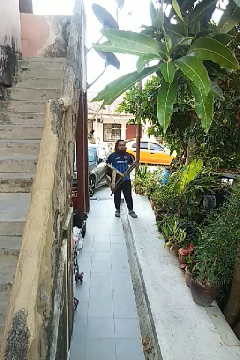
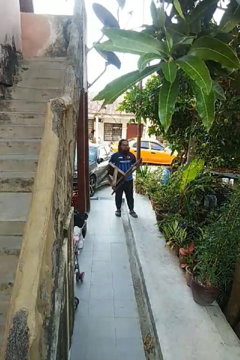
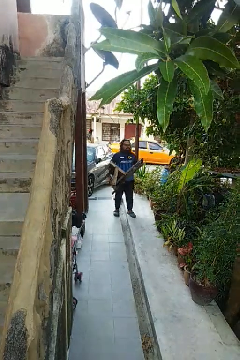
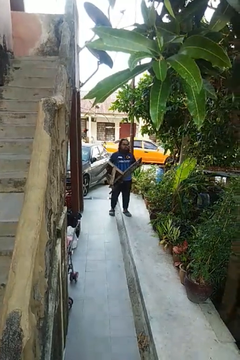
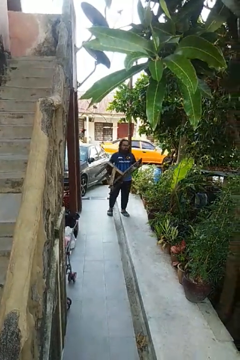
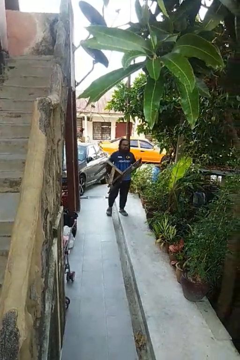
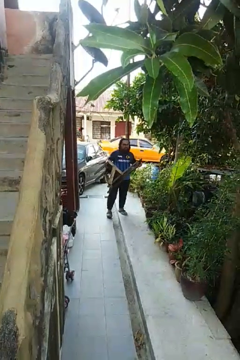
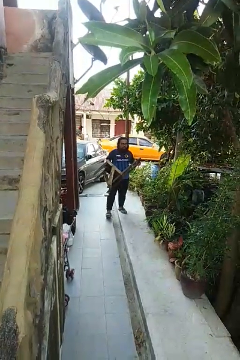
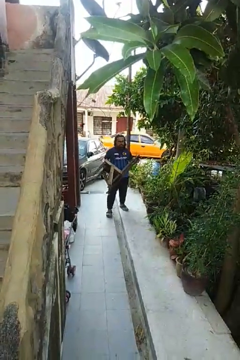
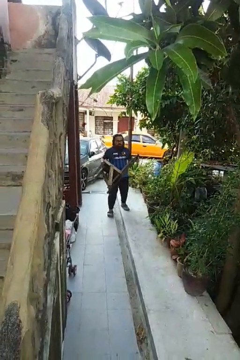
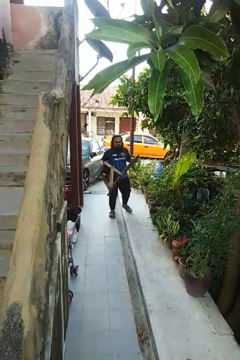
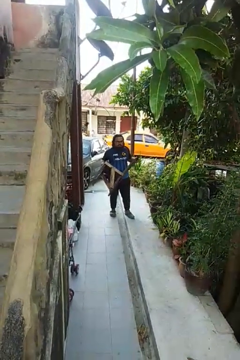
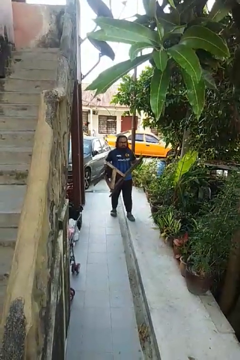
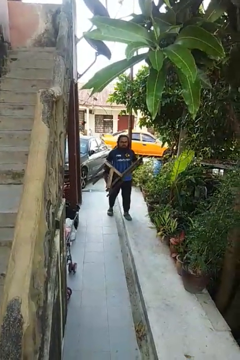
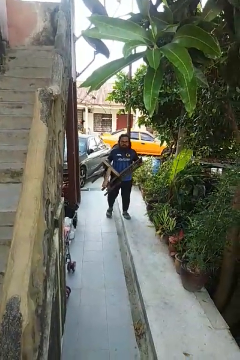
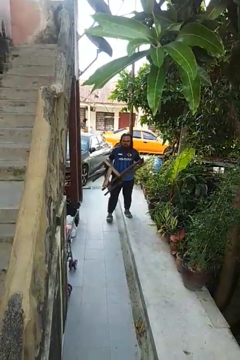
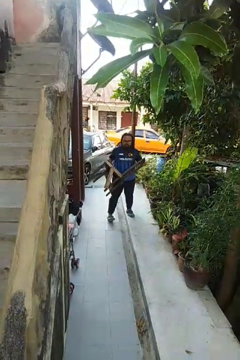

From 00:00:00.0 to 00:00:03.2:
person carries furniture

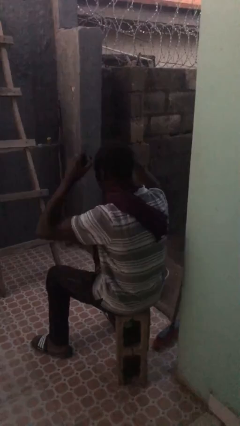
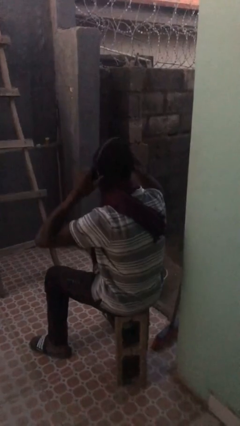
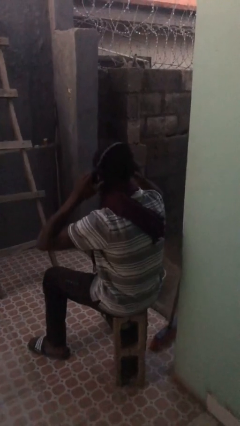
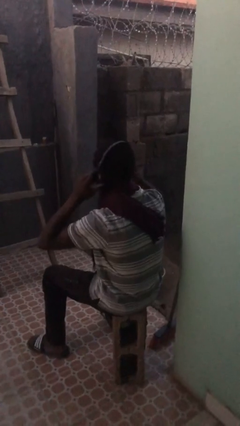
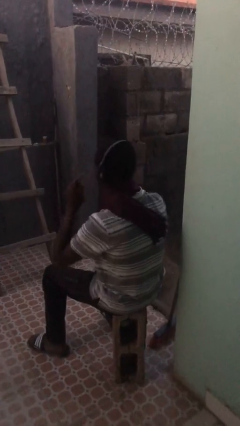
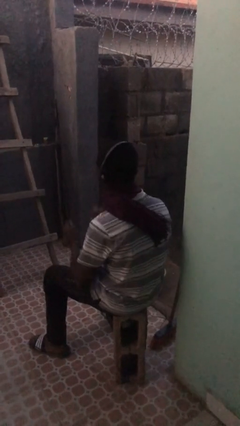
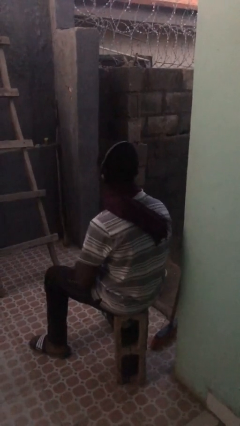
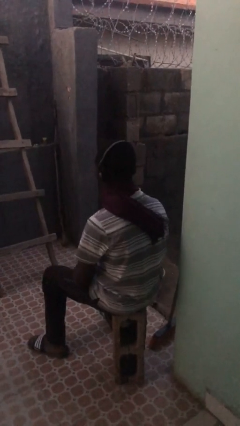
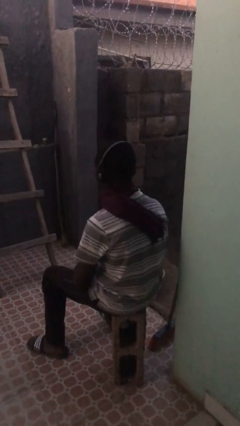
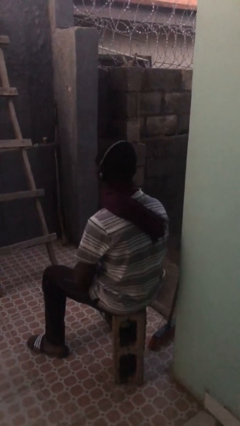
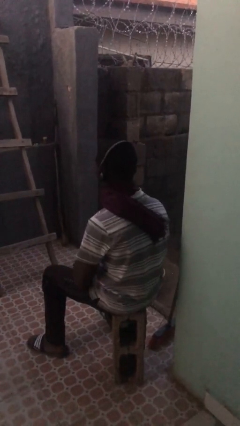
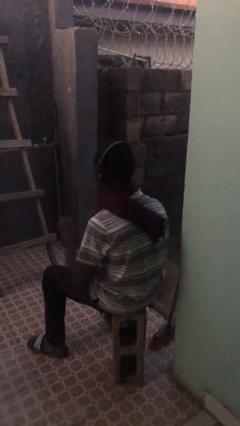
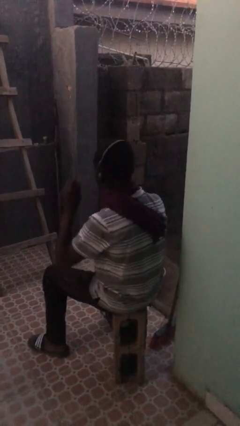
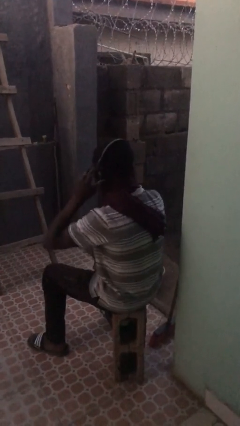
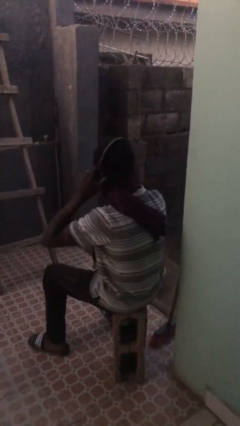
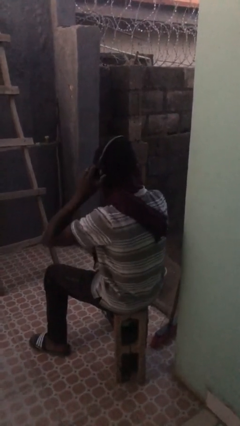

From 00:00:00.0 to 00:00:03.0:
person puts on headphones

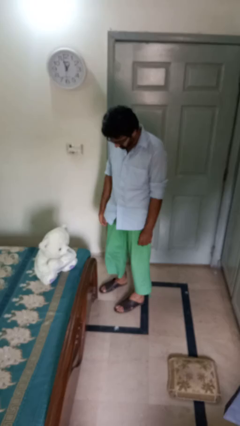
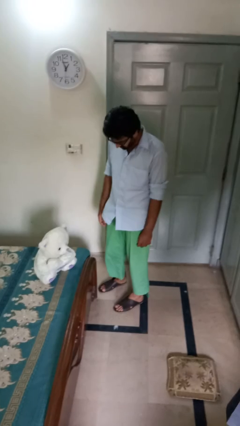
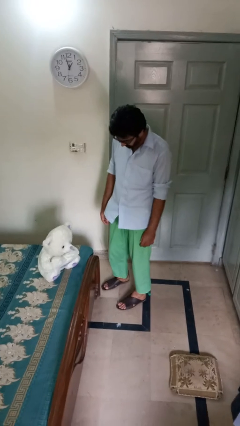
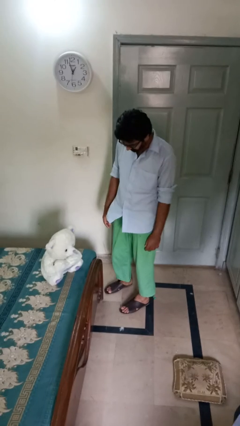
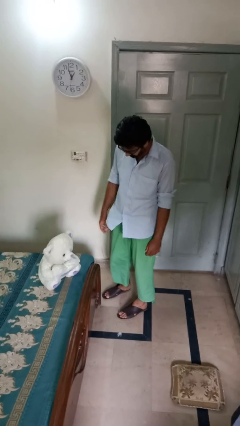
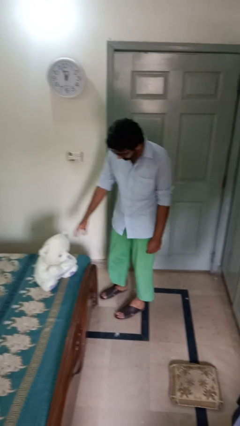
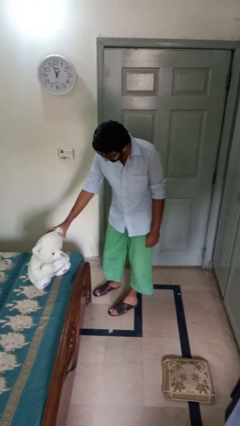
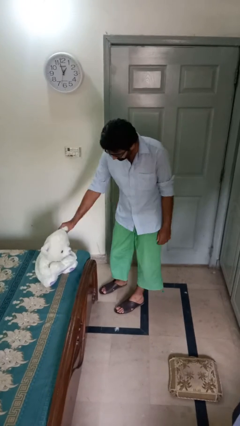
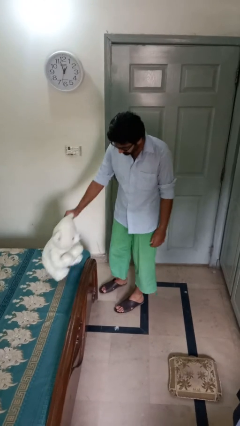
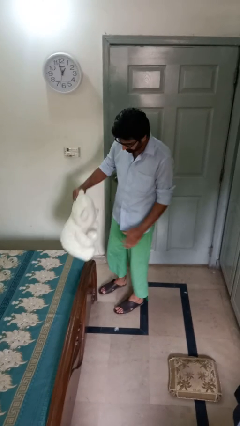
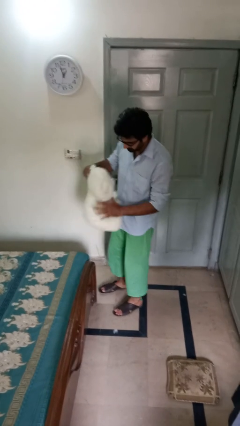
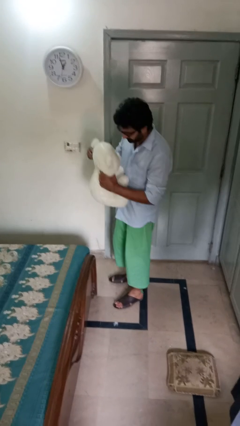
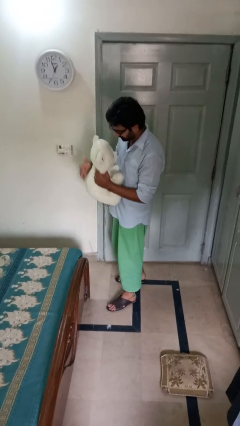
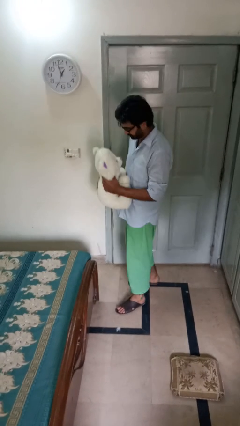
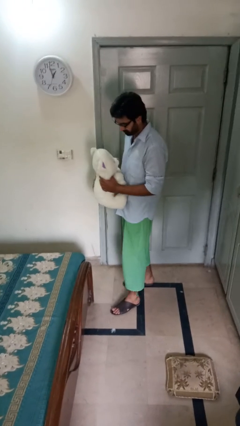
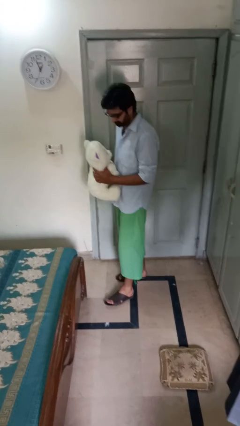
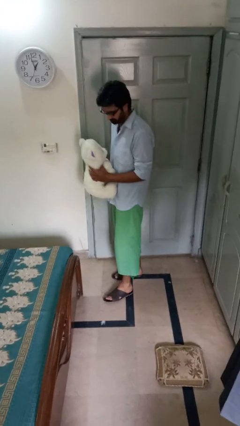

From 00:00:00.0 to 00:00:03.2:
person picks up object from bed

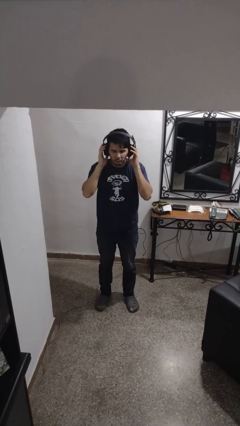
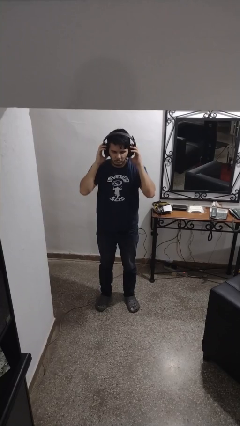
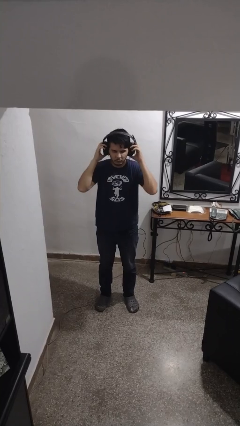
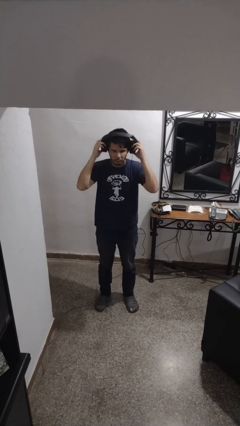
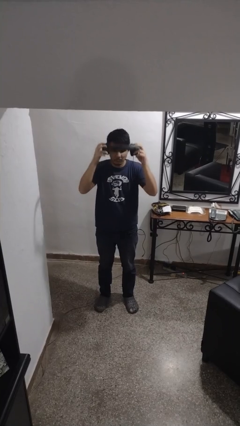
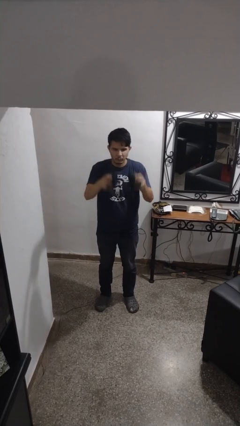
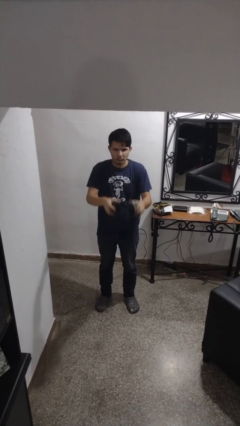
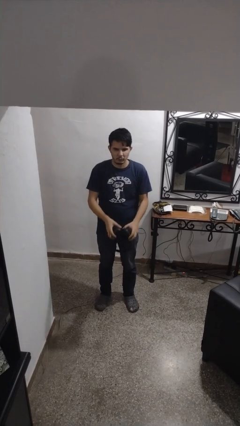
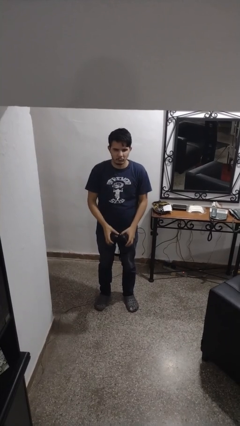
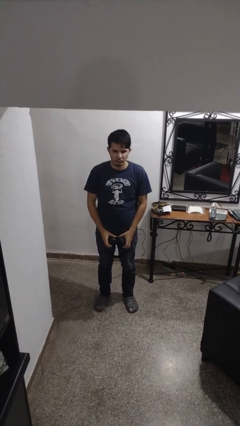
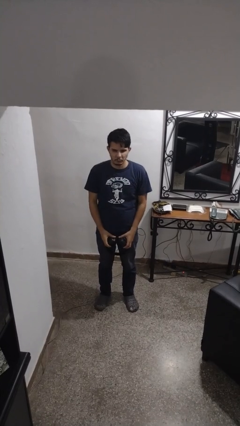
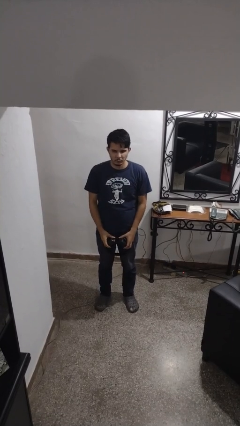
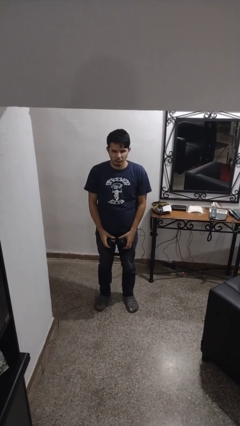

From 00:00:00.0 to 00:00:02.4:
person takes off headphones

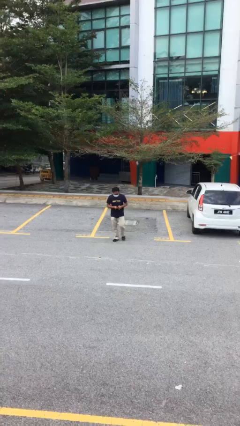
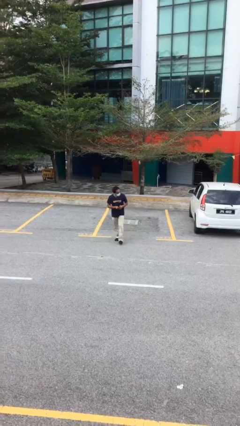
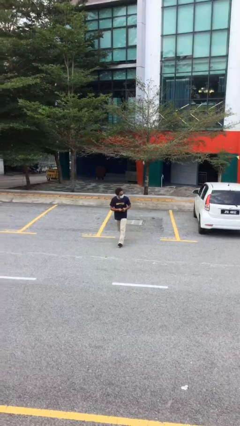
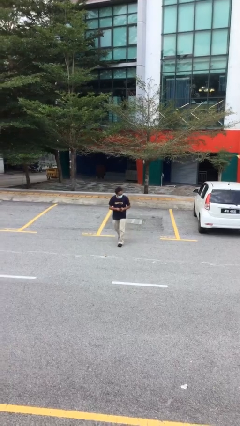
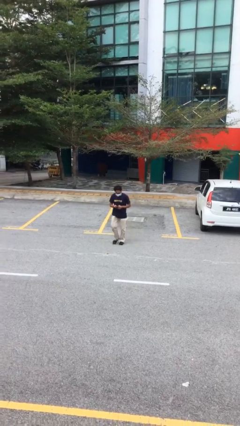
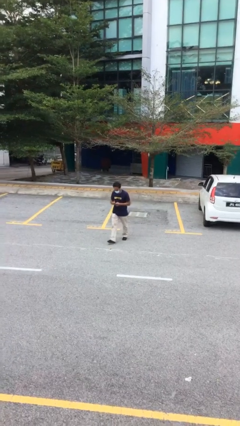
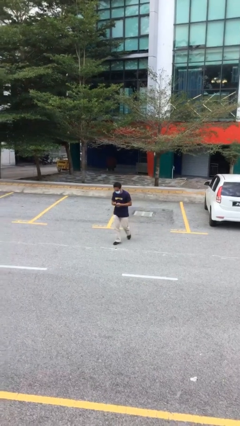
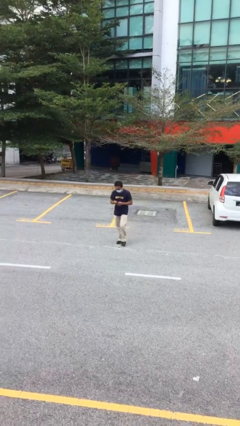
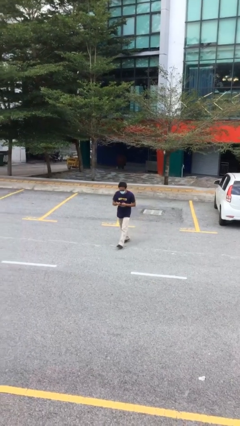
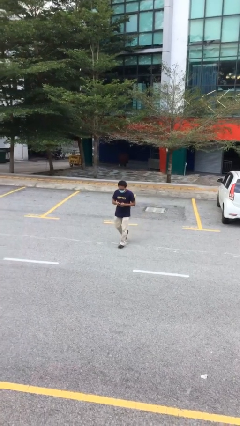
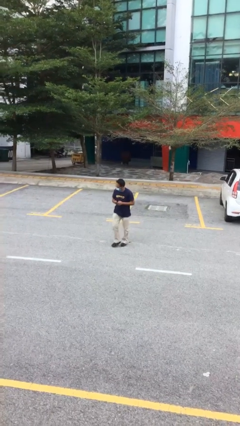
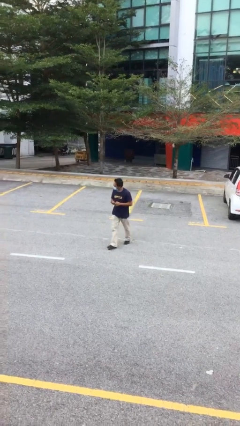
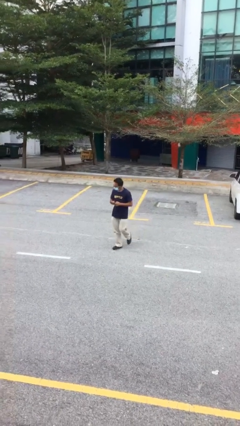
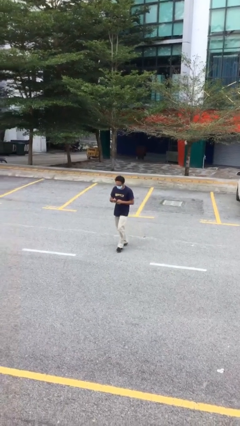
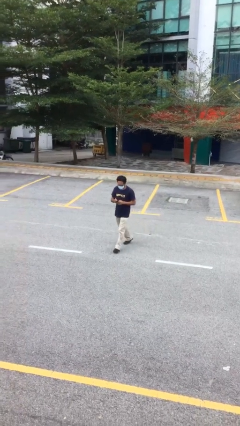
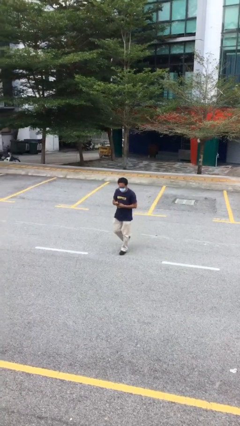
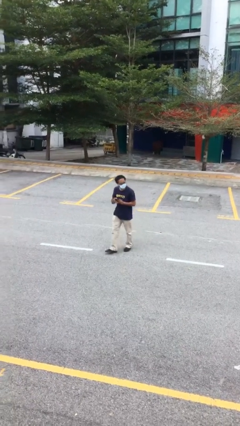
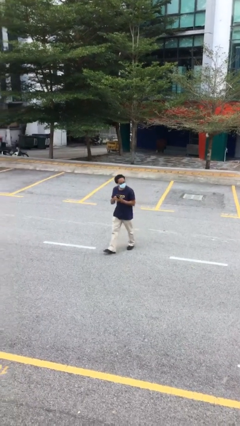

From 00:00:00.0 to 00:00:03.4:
person texts on phone

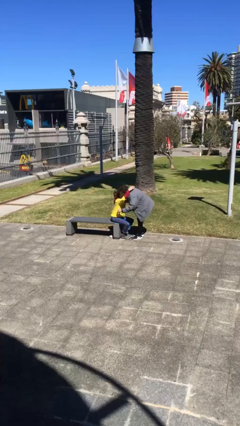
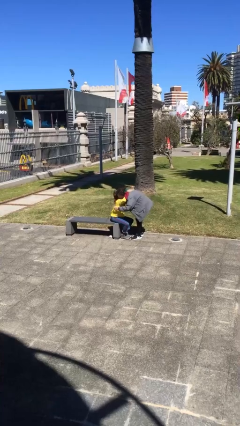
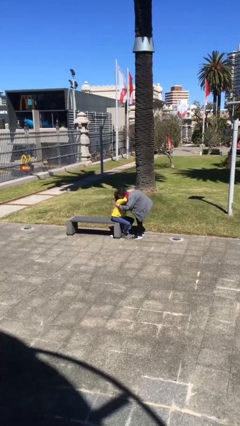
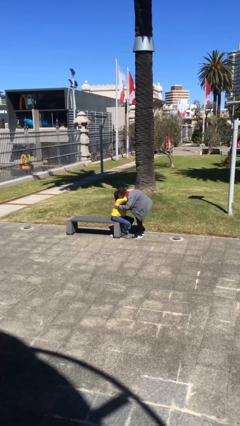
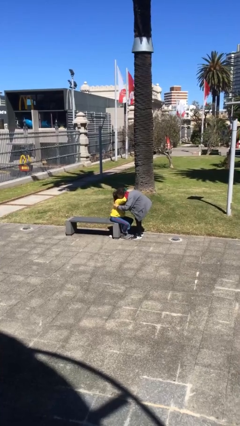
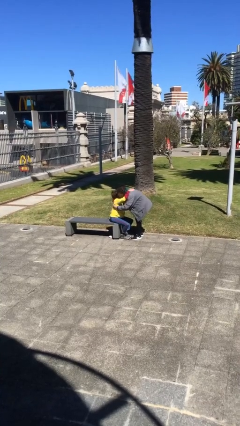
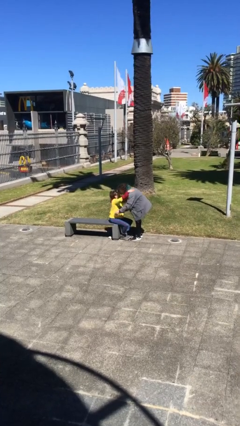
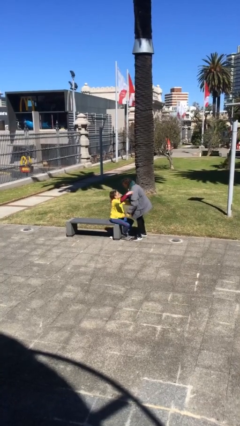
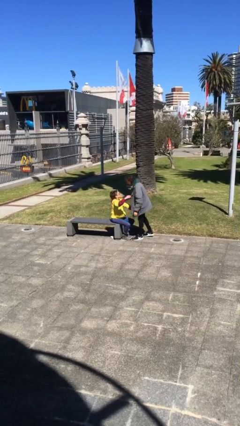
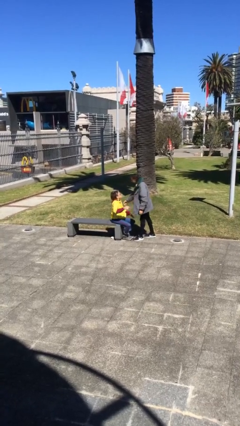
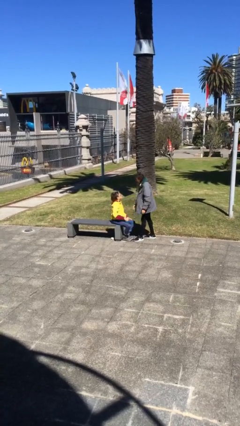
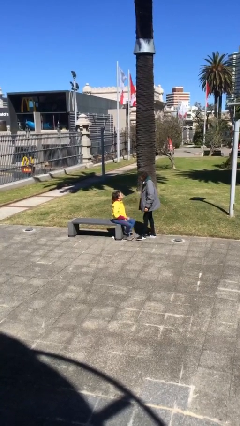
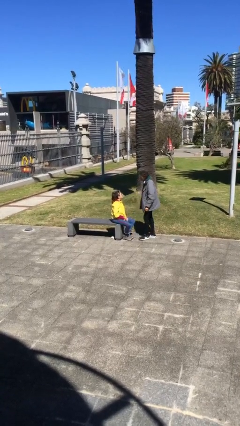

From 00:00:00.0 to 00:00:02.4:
person embraces person

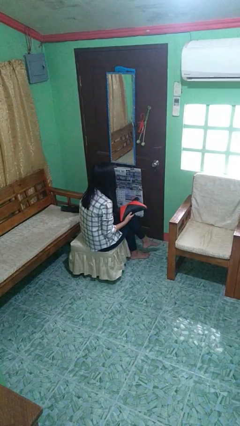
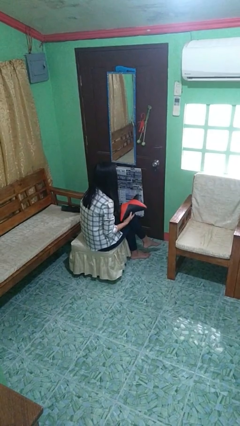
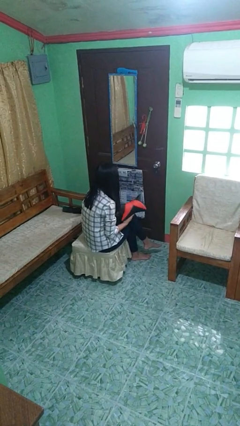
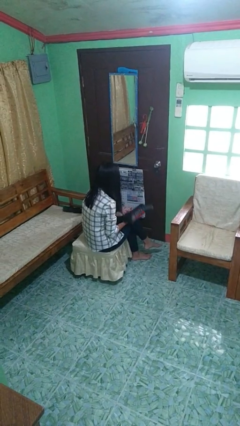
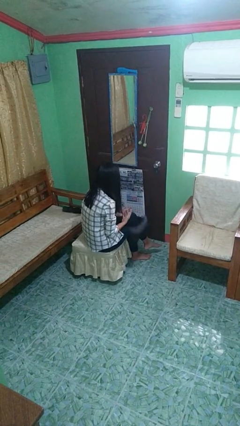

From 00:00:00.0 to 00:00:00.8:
person drops object
